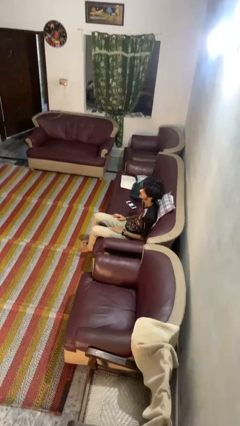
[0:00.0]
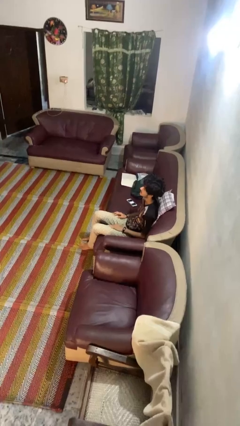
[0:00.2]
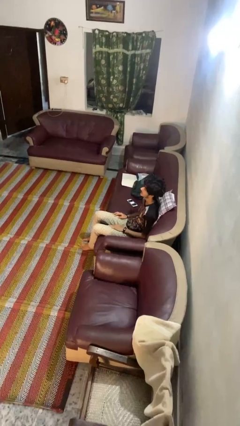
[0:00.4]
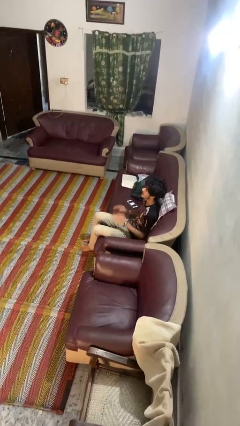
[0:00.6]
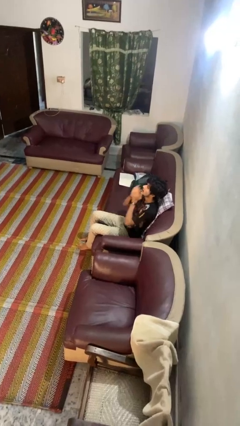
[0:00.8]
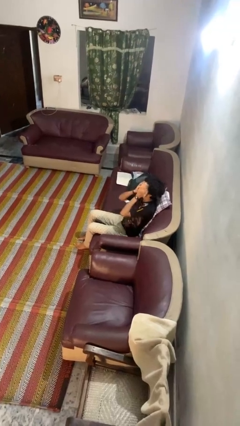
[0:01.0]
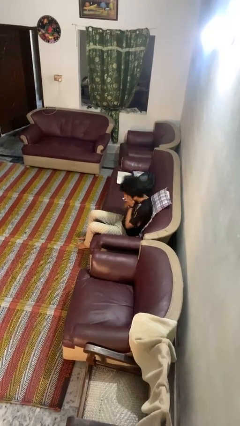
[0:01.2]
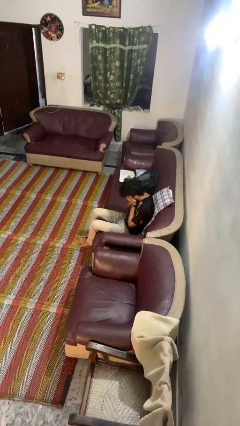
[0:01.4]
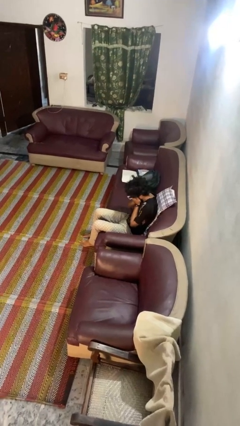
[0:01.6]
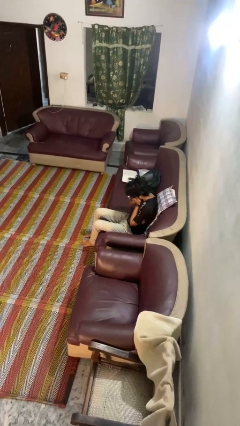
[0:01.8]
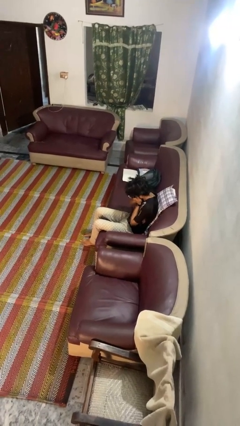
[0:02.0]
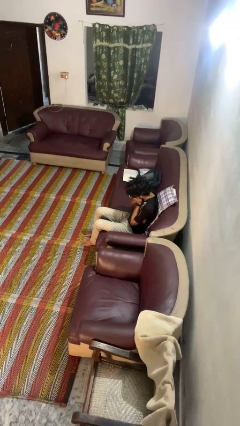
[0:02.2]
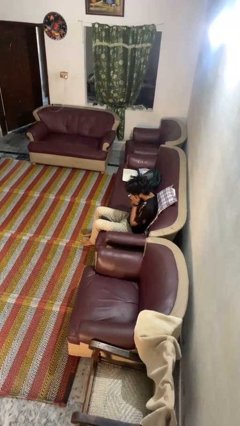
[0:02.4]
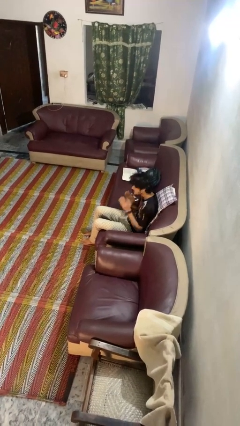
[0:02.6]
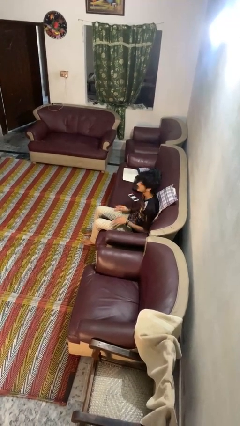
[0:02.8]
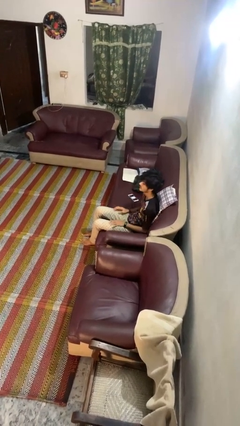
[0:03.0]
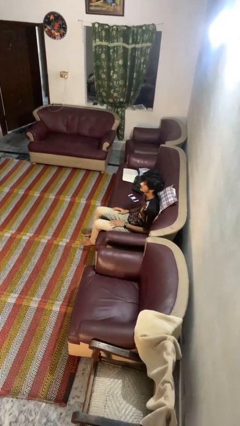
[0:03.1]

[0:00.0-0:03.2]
person sneezes into hand

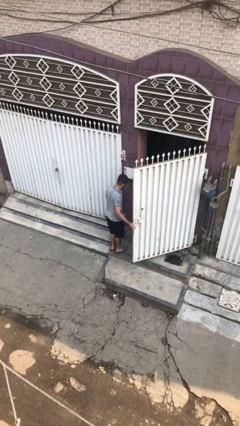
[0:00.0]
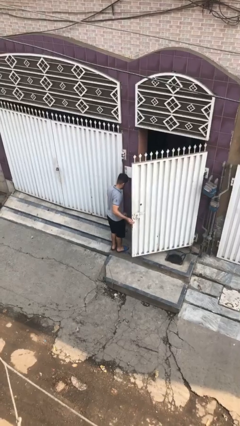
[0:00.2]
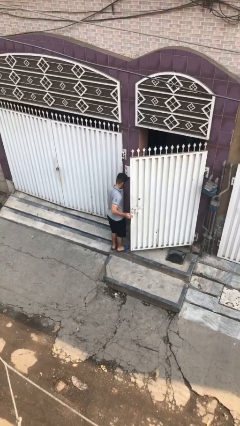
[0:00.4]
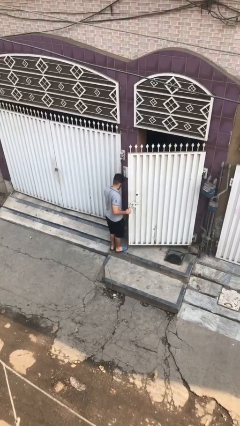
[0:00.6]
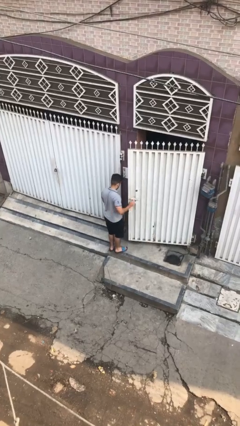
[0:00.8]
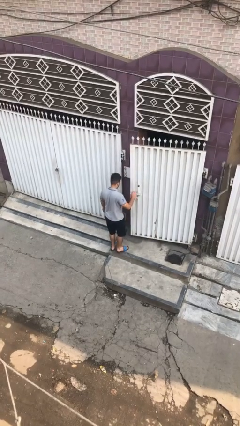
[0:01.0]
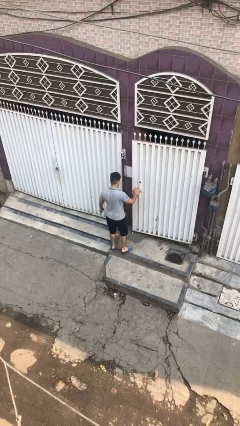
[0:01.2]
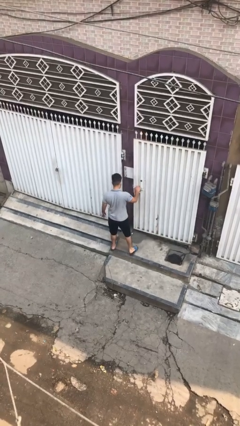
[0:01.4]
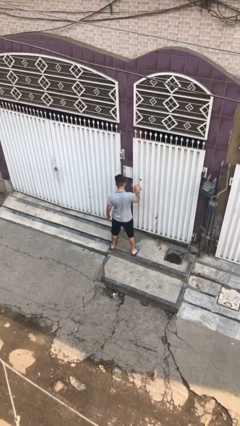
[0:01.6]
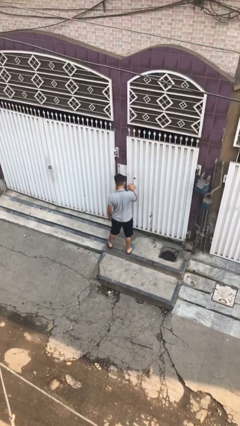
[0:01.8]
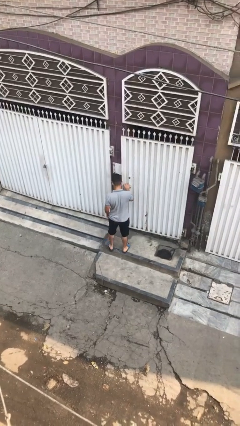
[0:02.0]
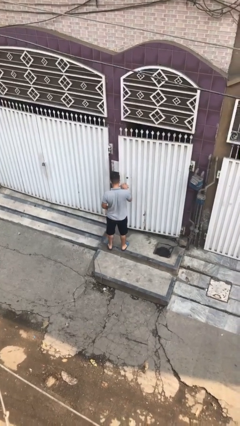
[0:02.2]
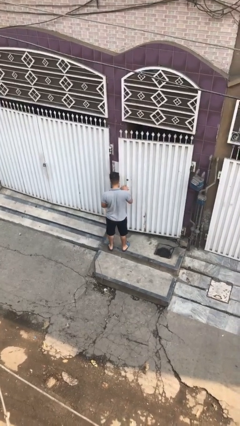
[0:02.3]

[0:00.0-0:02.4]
person closes facility door

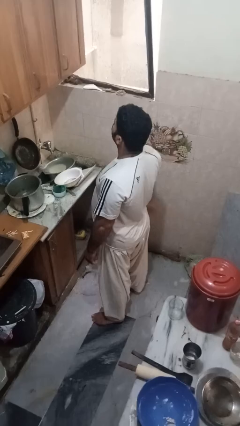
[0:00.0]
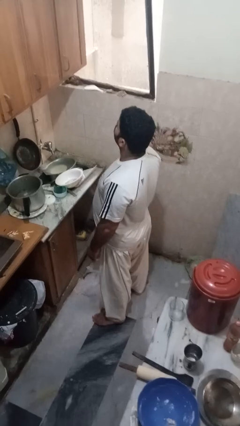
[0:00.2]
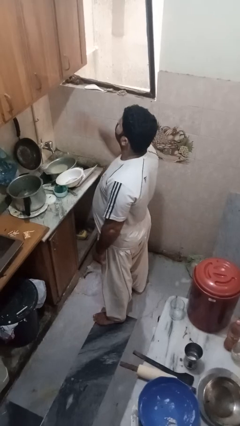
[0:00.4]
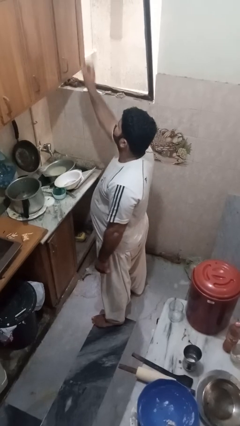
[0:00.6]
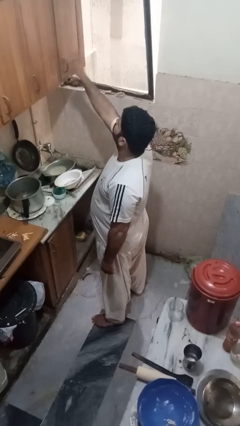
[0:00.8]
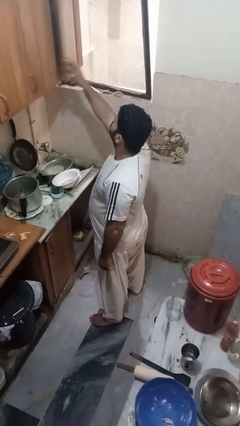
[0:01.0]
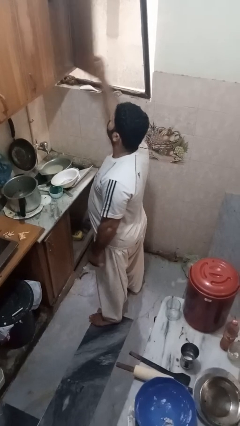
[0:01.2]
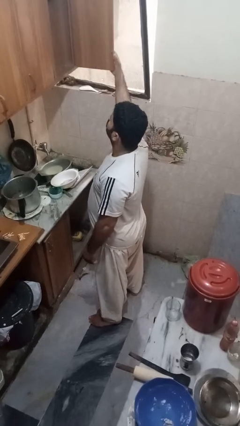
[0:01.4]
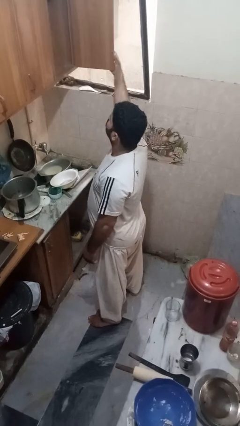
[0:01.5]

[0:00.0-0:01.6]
person opens cabinet

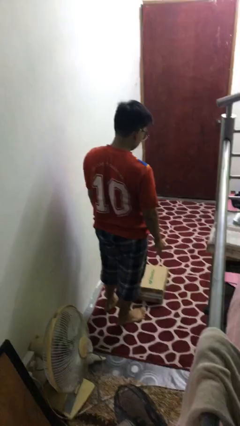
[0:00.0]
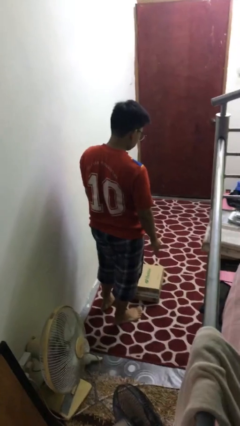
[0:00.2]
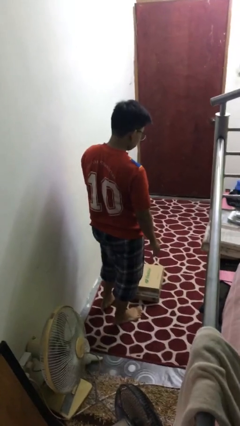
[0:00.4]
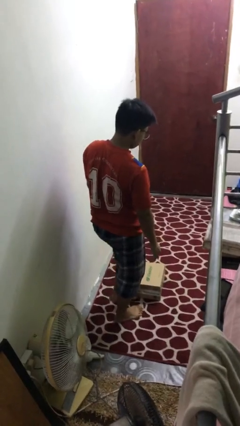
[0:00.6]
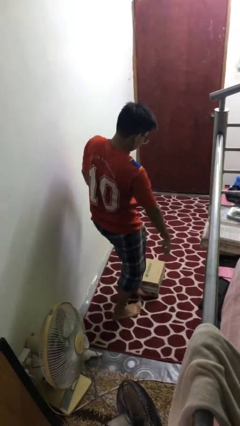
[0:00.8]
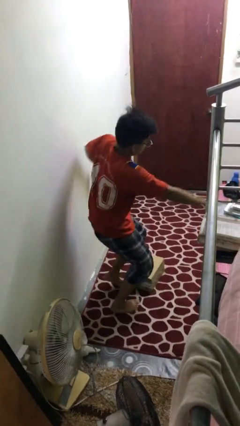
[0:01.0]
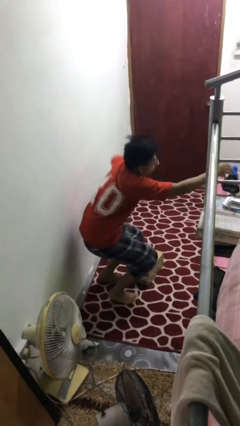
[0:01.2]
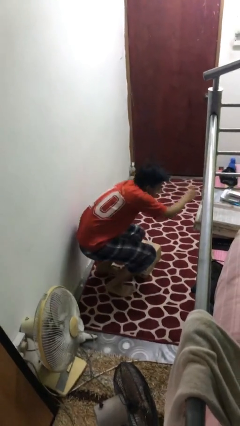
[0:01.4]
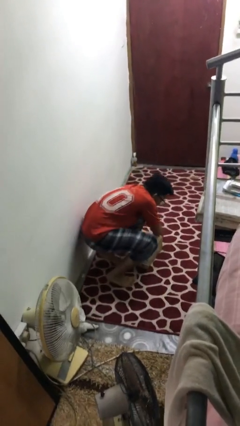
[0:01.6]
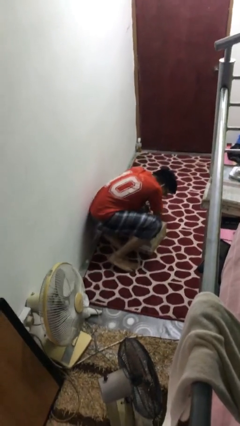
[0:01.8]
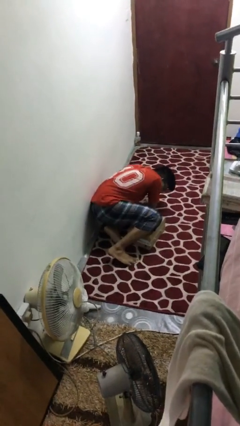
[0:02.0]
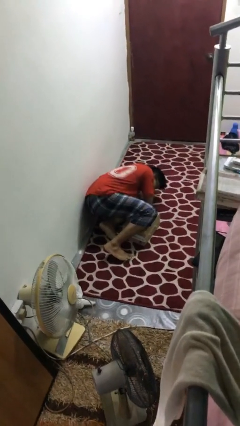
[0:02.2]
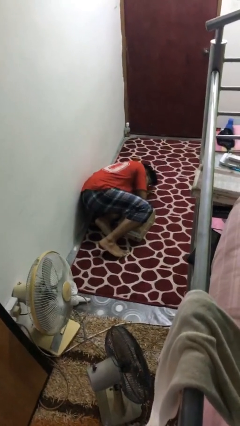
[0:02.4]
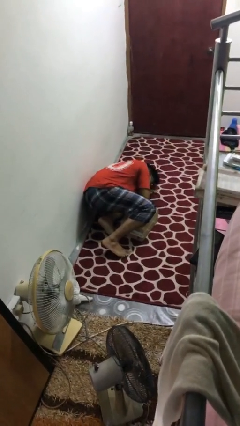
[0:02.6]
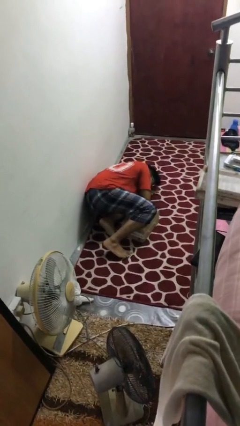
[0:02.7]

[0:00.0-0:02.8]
person trips on object on floor

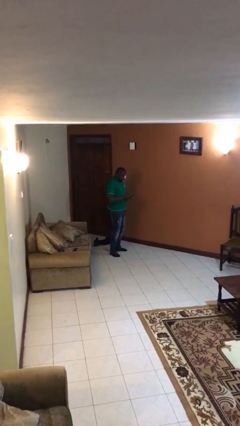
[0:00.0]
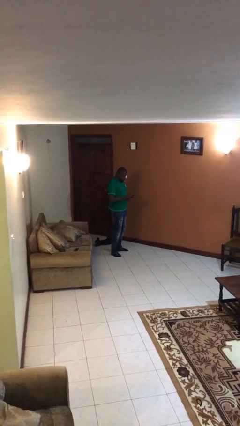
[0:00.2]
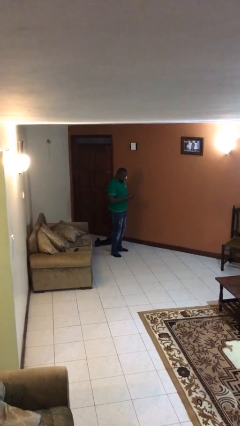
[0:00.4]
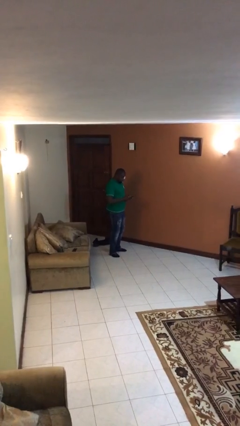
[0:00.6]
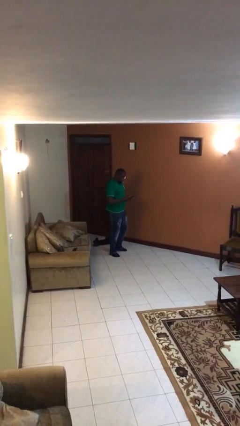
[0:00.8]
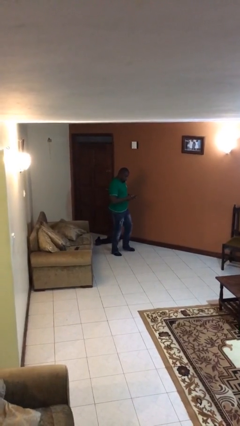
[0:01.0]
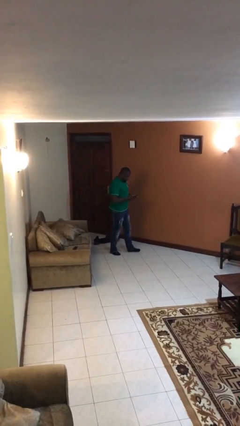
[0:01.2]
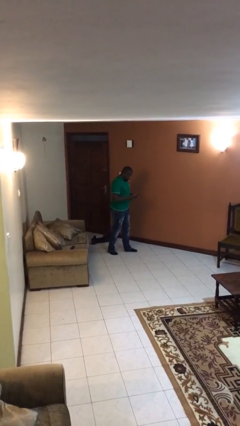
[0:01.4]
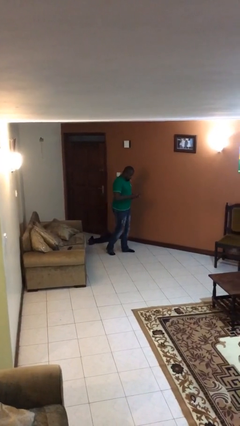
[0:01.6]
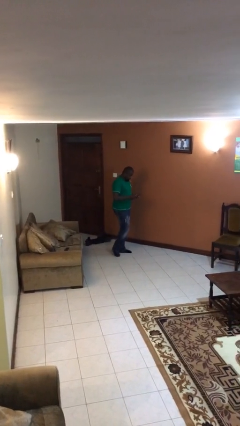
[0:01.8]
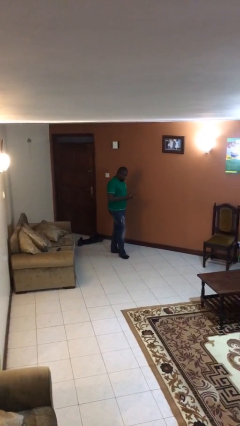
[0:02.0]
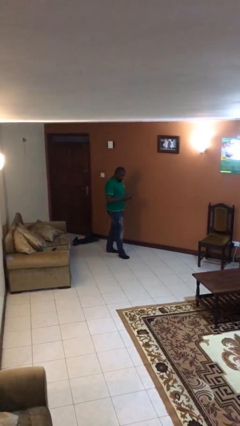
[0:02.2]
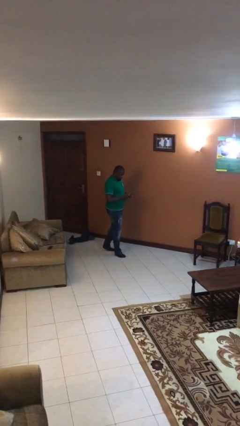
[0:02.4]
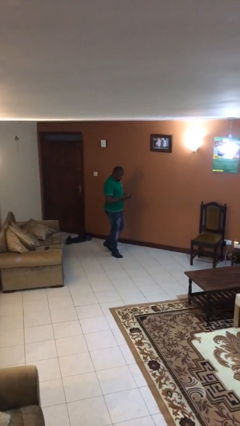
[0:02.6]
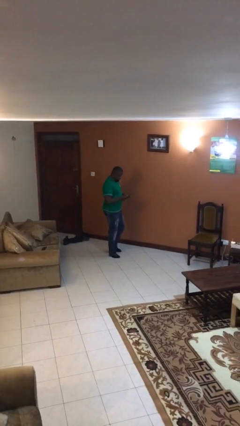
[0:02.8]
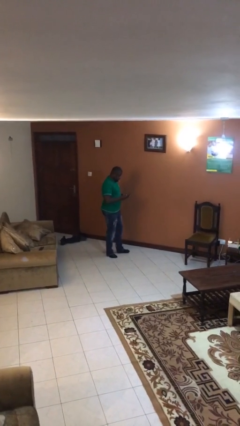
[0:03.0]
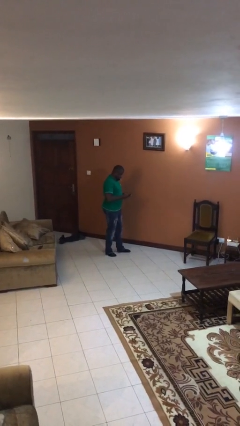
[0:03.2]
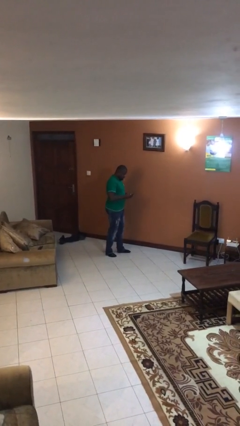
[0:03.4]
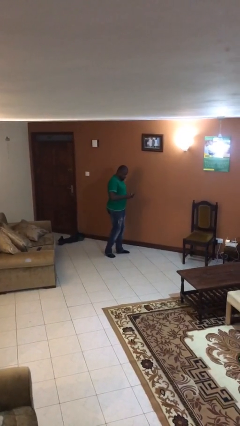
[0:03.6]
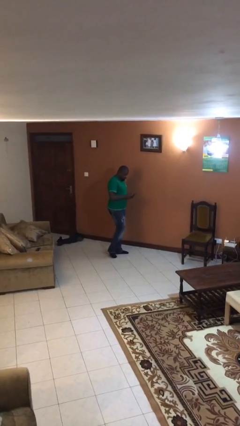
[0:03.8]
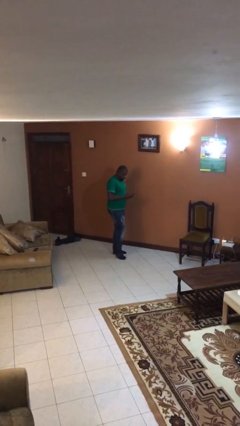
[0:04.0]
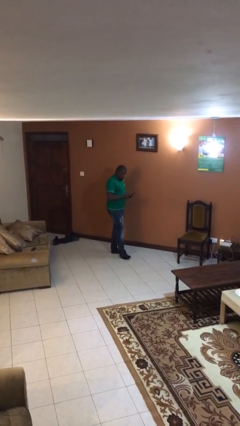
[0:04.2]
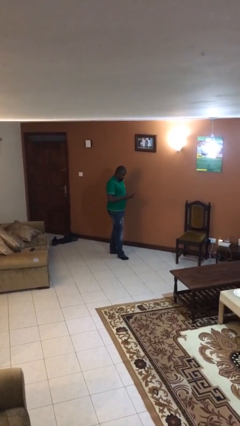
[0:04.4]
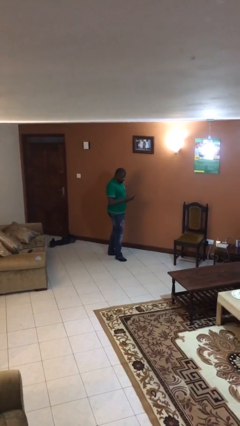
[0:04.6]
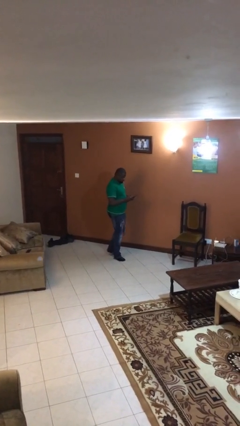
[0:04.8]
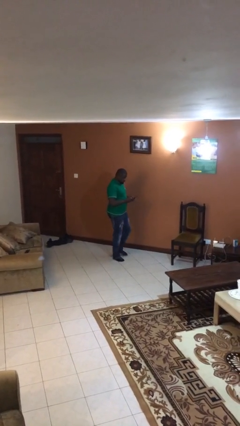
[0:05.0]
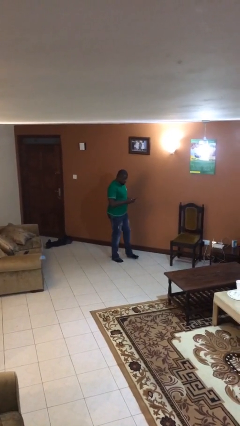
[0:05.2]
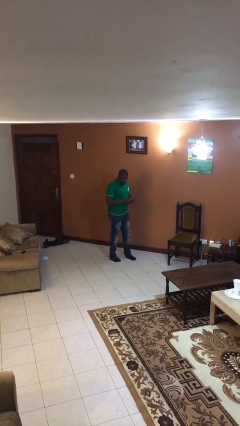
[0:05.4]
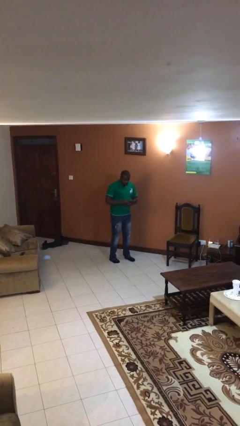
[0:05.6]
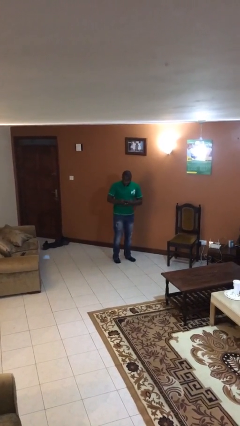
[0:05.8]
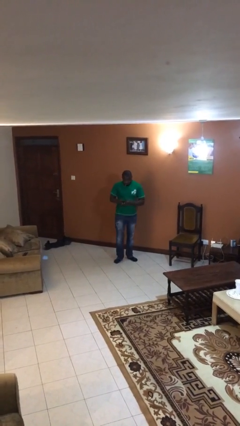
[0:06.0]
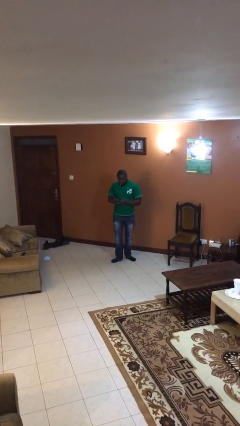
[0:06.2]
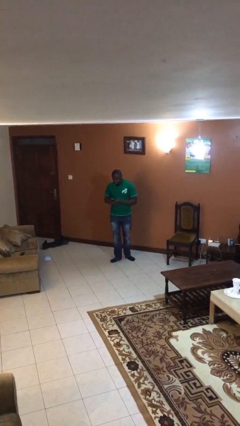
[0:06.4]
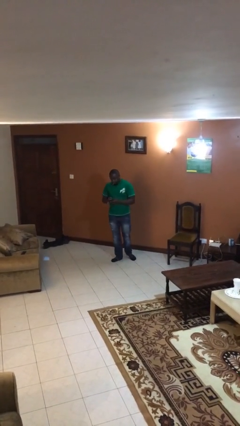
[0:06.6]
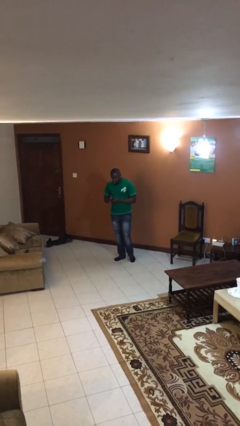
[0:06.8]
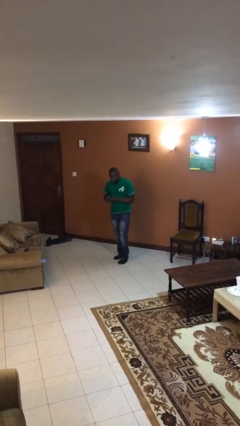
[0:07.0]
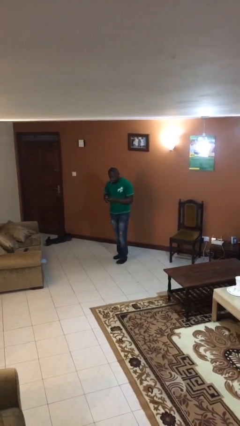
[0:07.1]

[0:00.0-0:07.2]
person texts on phone

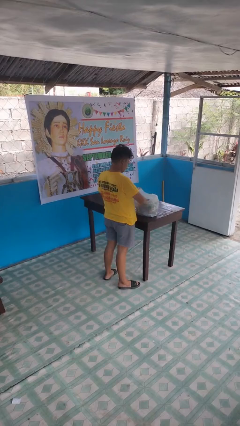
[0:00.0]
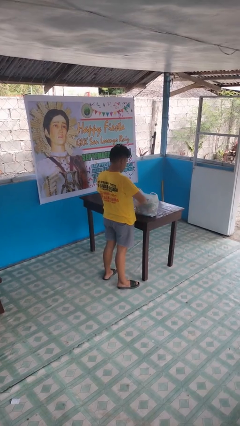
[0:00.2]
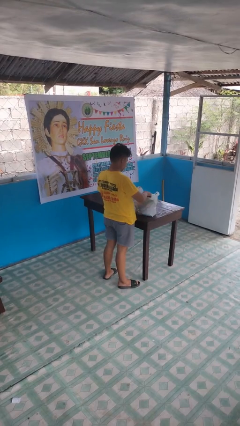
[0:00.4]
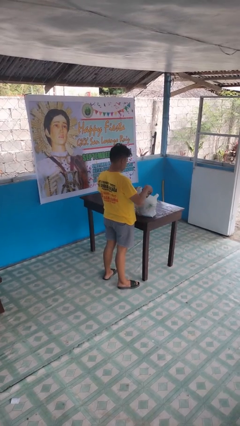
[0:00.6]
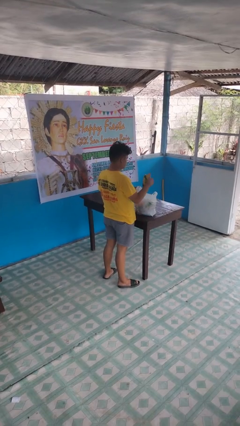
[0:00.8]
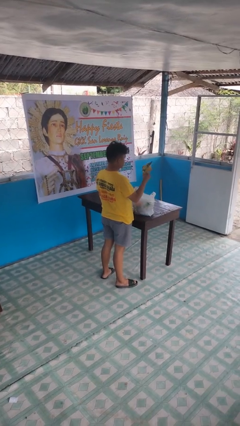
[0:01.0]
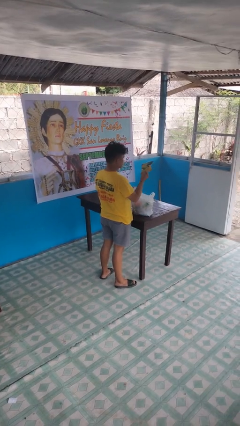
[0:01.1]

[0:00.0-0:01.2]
person takes object from bag
